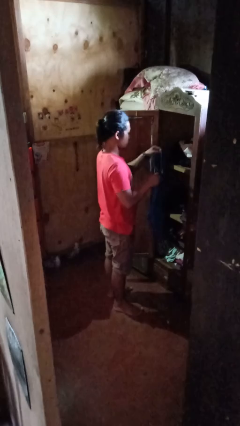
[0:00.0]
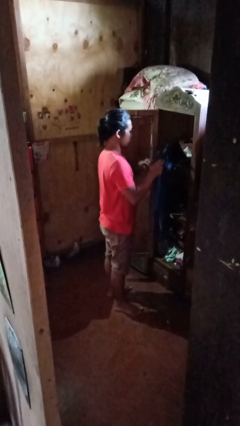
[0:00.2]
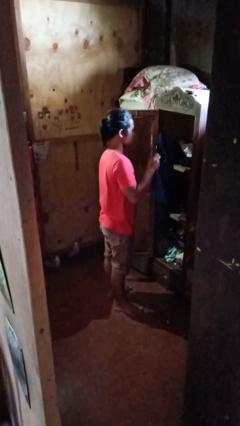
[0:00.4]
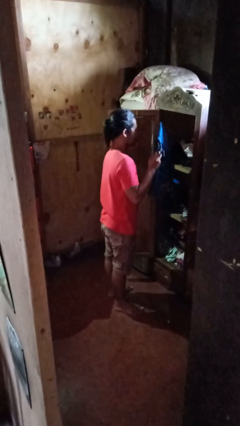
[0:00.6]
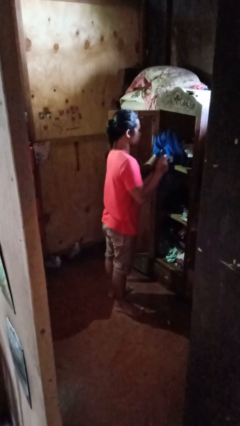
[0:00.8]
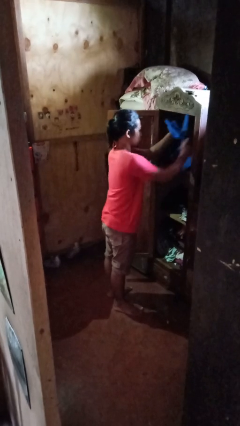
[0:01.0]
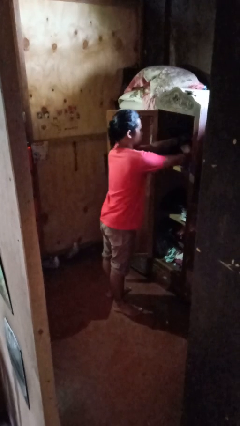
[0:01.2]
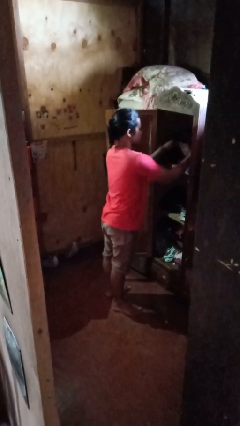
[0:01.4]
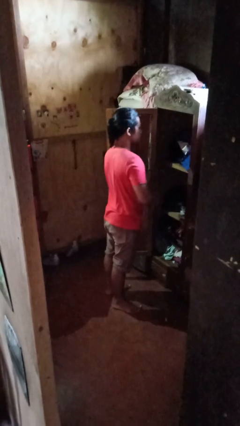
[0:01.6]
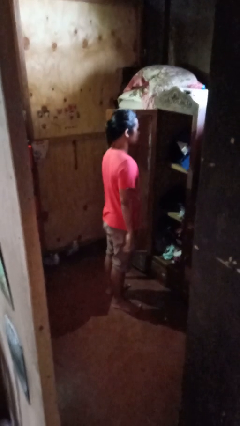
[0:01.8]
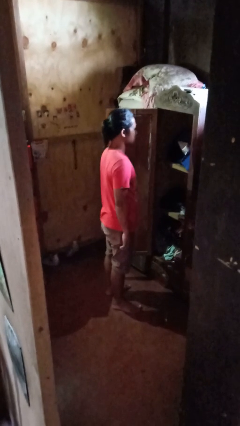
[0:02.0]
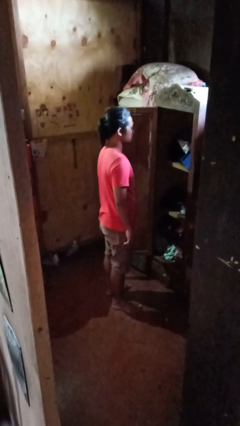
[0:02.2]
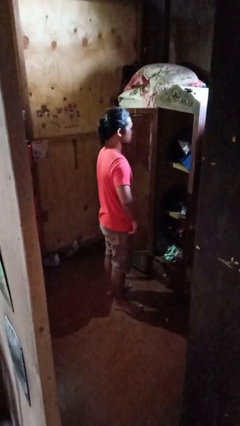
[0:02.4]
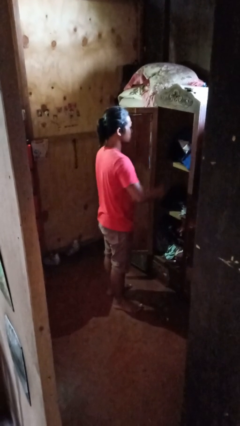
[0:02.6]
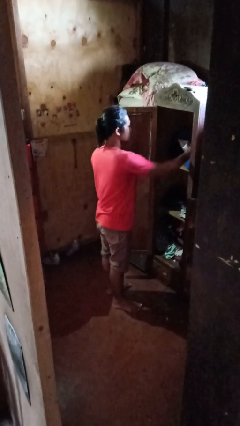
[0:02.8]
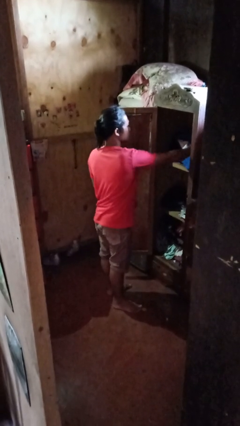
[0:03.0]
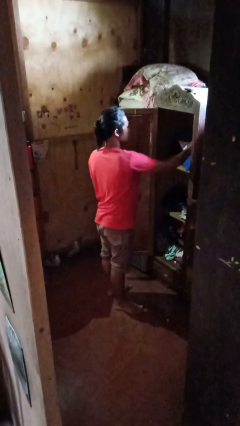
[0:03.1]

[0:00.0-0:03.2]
person puts clothes into closet

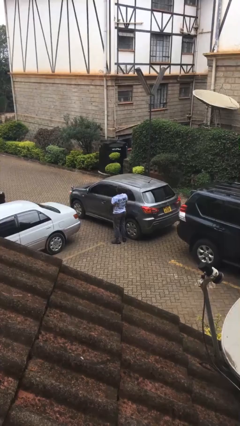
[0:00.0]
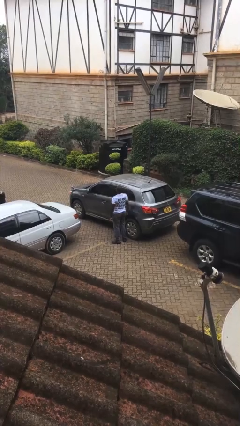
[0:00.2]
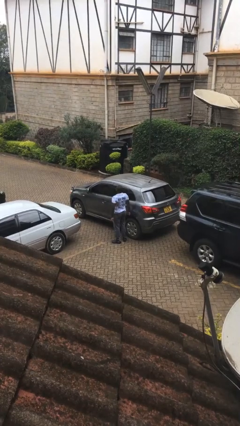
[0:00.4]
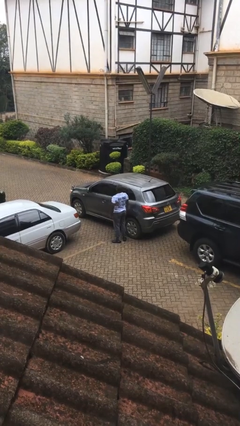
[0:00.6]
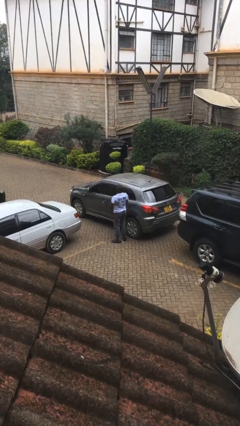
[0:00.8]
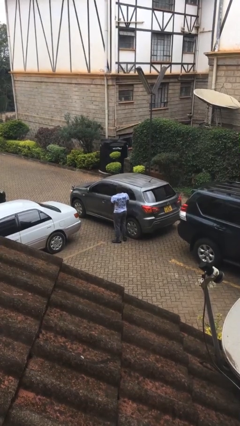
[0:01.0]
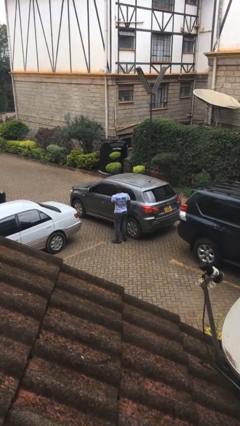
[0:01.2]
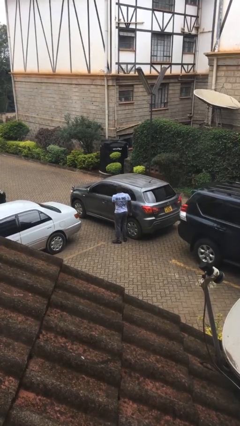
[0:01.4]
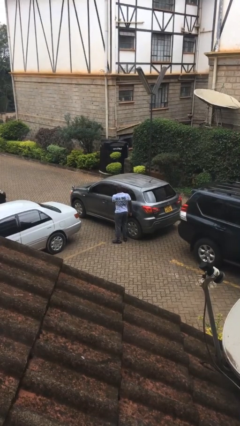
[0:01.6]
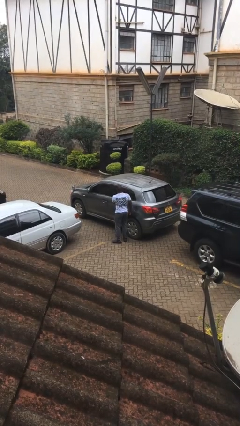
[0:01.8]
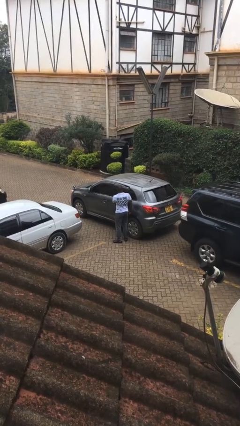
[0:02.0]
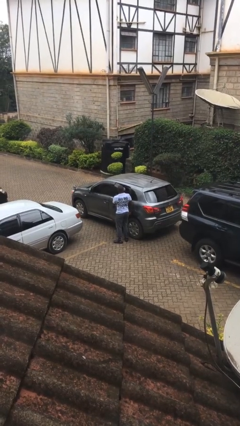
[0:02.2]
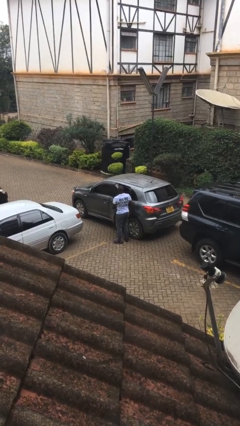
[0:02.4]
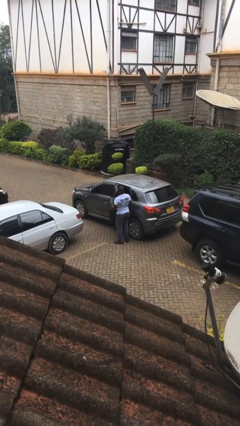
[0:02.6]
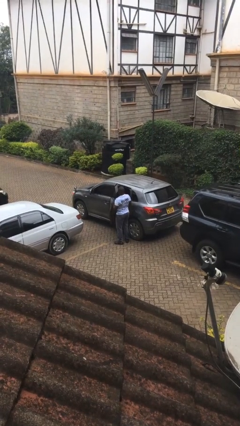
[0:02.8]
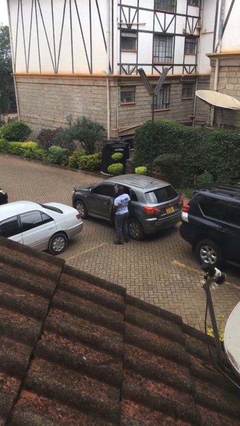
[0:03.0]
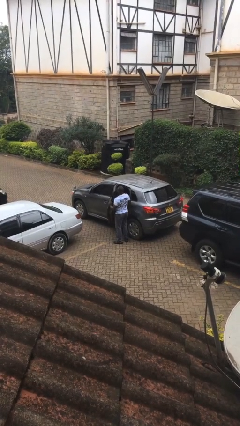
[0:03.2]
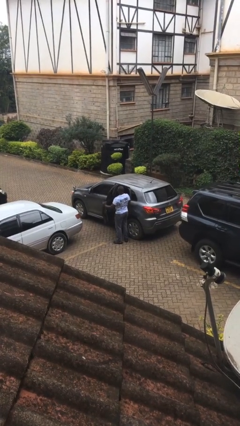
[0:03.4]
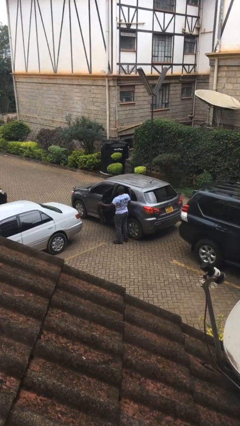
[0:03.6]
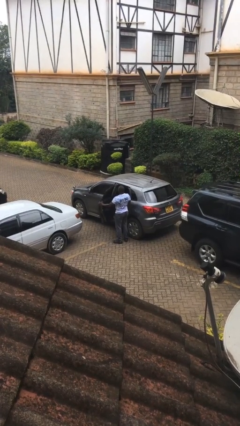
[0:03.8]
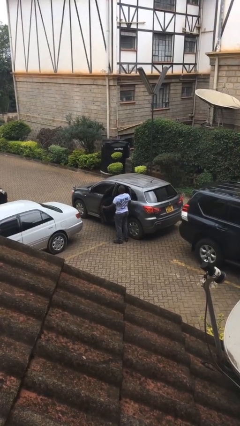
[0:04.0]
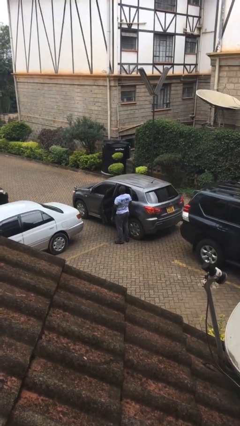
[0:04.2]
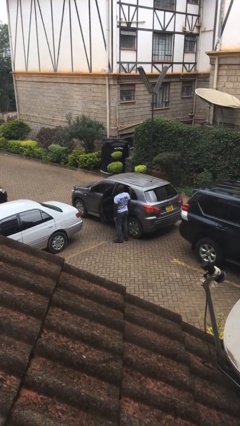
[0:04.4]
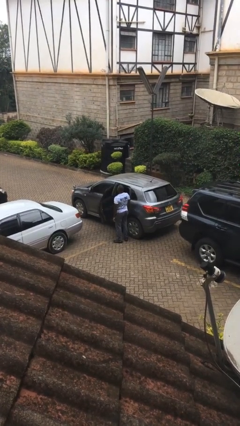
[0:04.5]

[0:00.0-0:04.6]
person opens car door

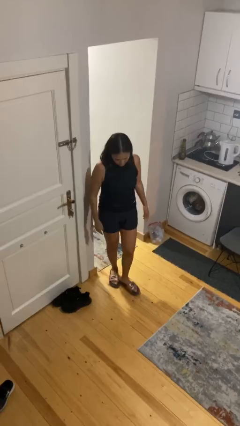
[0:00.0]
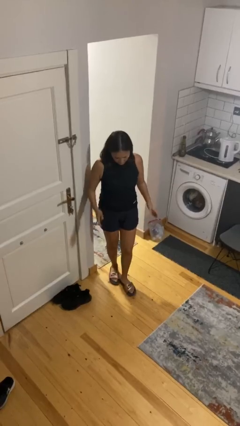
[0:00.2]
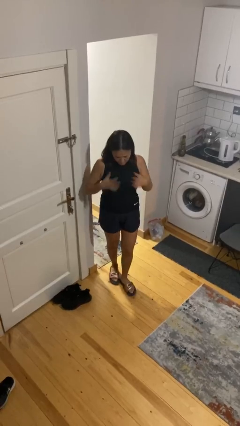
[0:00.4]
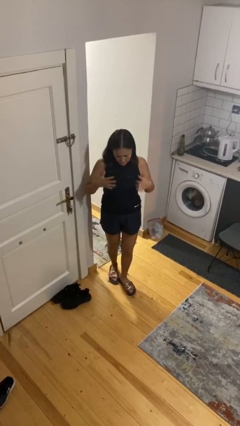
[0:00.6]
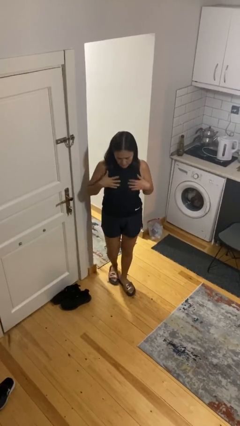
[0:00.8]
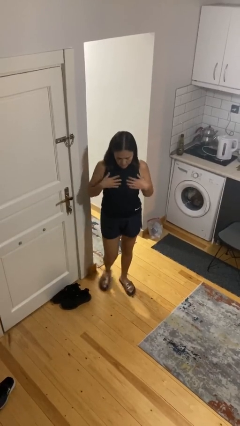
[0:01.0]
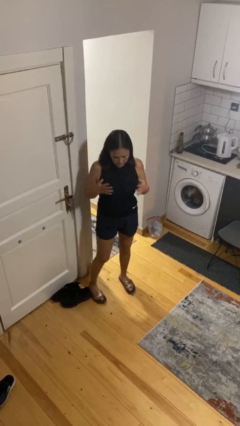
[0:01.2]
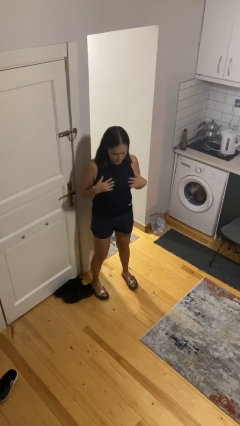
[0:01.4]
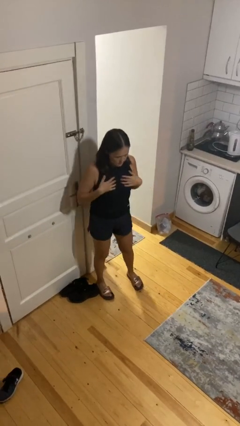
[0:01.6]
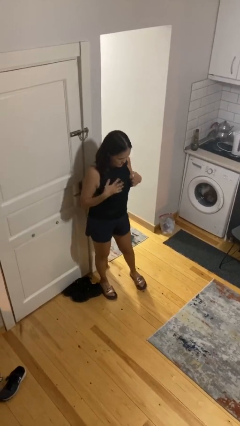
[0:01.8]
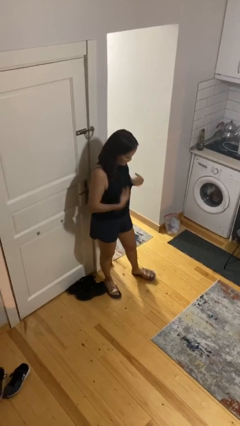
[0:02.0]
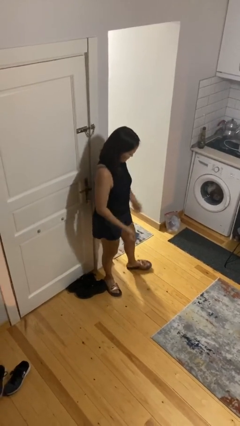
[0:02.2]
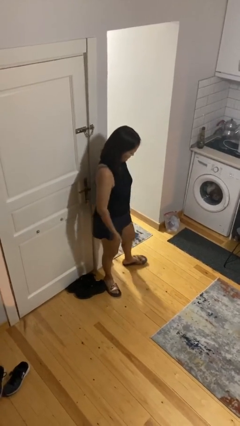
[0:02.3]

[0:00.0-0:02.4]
person drums on chest

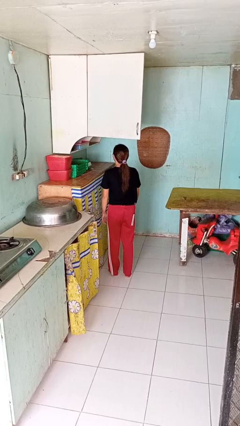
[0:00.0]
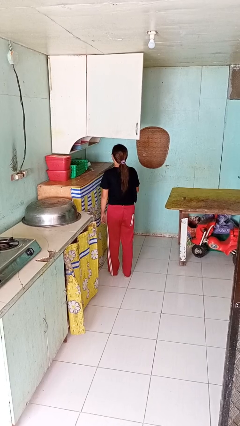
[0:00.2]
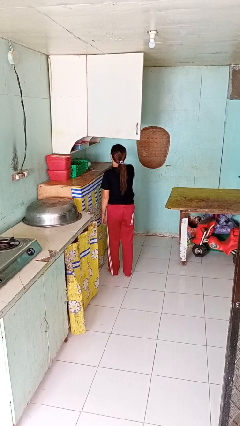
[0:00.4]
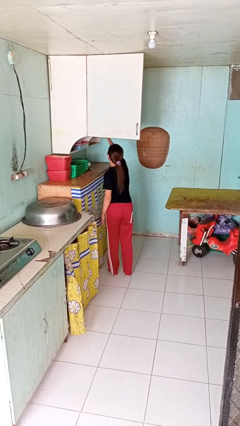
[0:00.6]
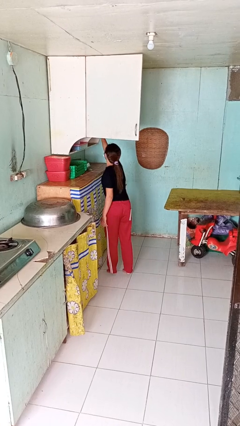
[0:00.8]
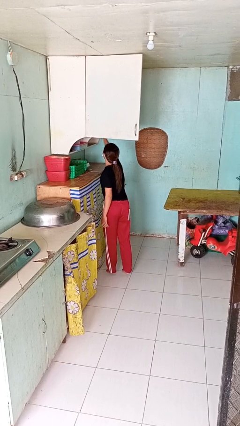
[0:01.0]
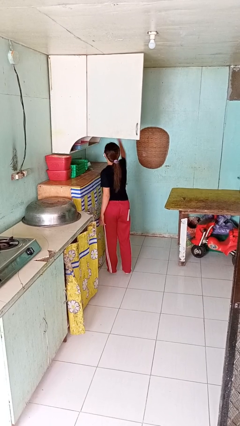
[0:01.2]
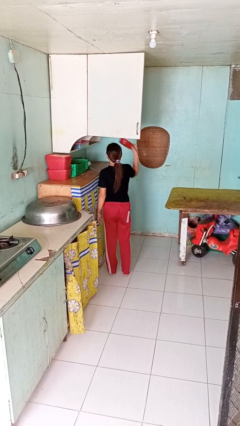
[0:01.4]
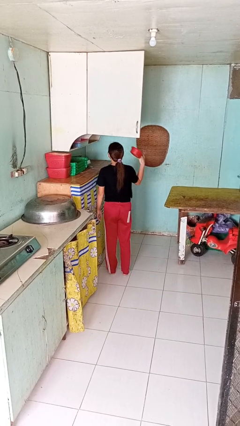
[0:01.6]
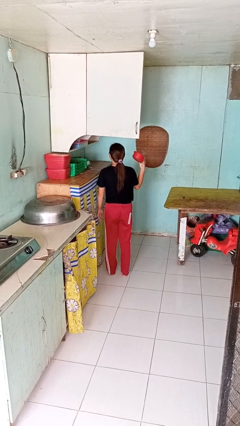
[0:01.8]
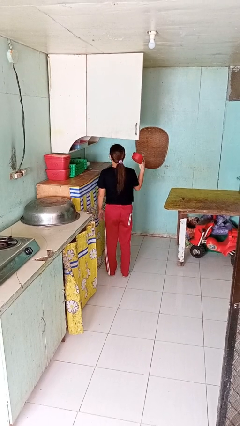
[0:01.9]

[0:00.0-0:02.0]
person takes object from cabinet

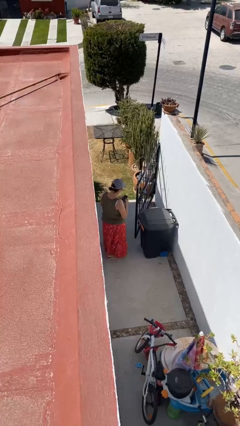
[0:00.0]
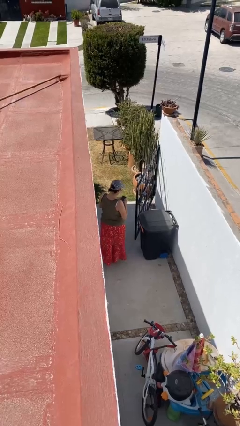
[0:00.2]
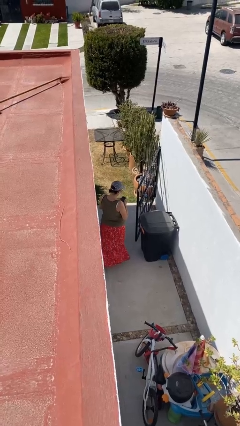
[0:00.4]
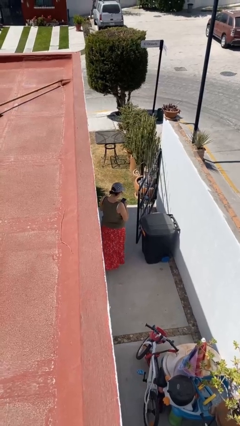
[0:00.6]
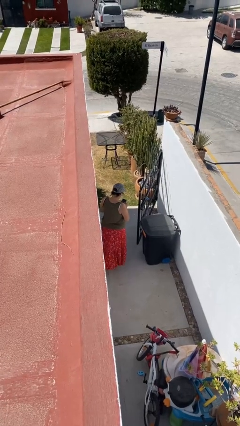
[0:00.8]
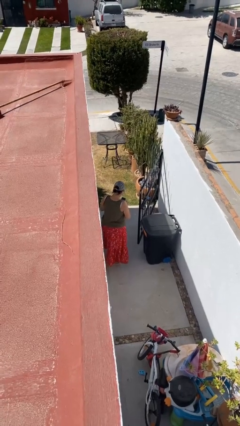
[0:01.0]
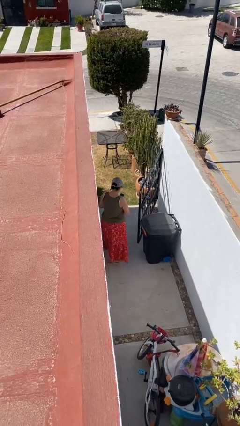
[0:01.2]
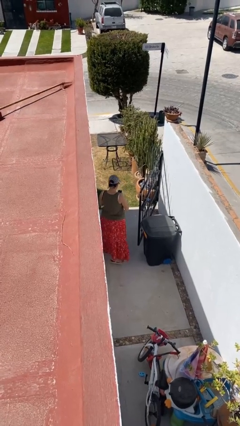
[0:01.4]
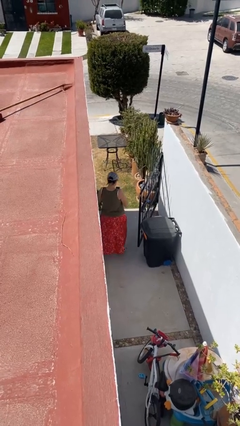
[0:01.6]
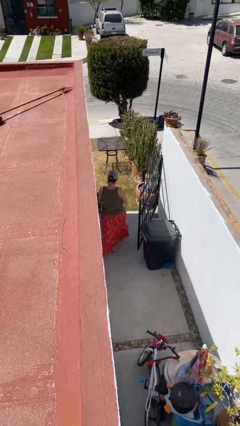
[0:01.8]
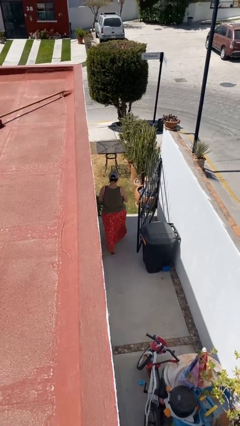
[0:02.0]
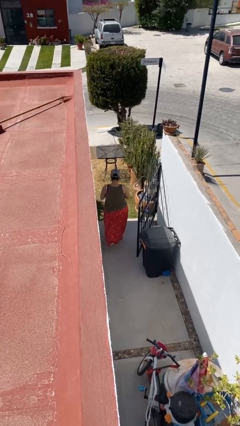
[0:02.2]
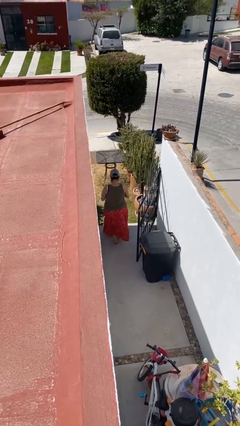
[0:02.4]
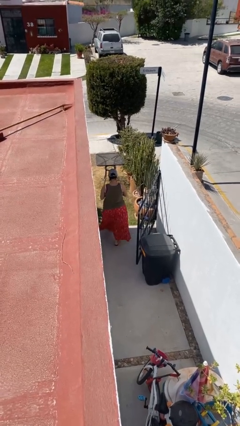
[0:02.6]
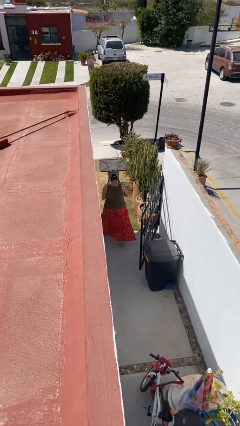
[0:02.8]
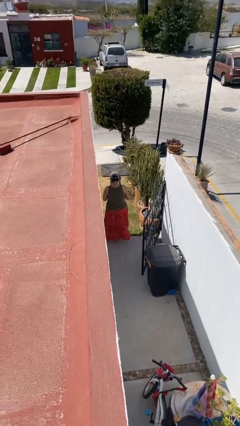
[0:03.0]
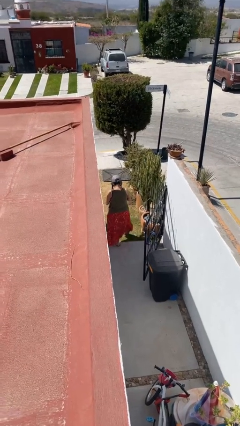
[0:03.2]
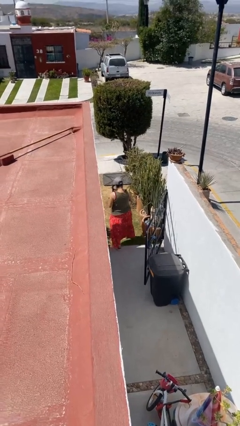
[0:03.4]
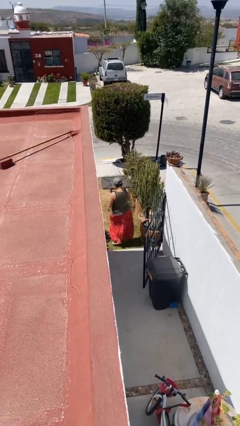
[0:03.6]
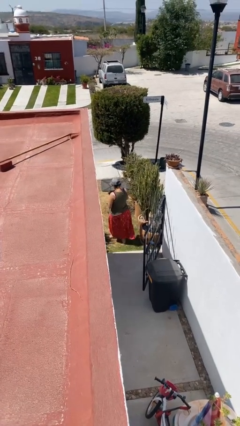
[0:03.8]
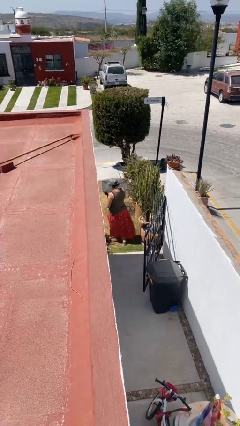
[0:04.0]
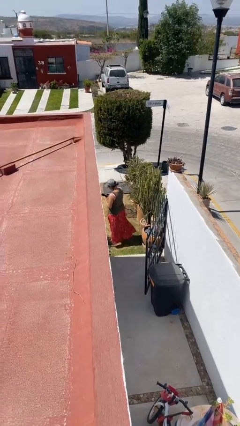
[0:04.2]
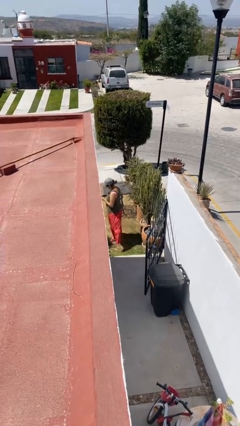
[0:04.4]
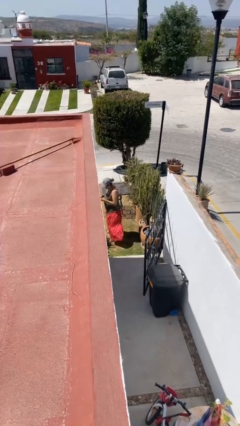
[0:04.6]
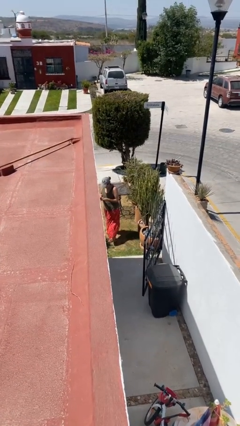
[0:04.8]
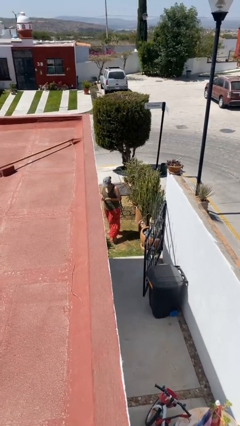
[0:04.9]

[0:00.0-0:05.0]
person exits scene through structure

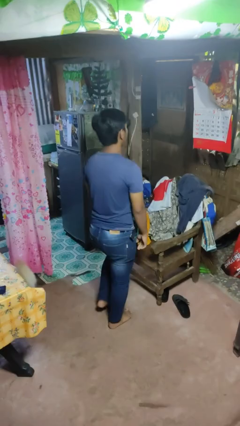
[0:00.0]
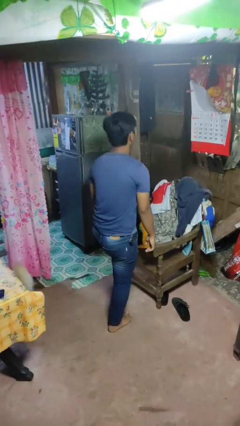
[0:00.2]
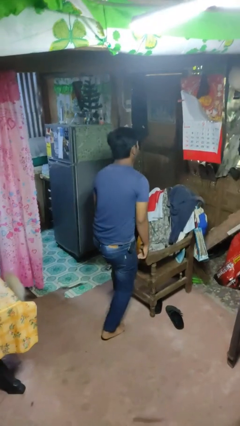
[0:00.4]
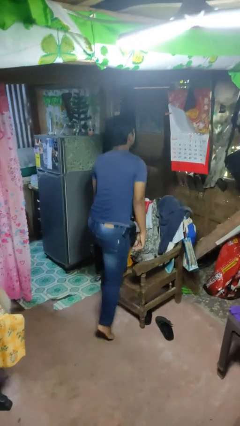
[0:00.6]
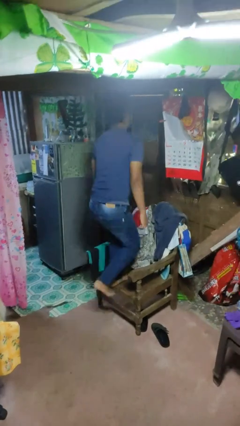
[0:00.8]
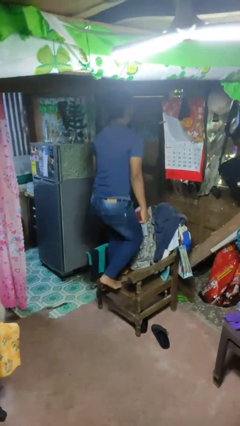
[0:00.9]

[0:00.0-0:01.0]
person climbs on chair
